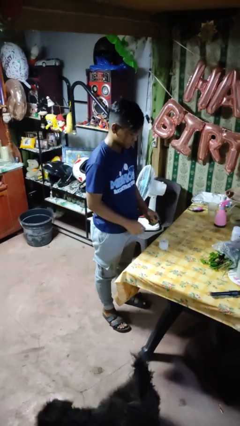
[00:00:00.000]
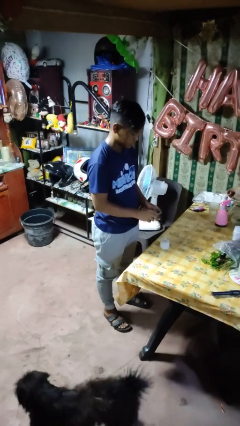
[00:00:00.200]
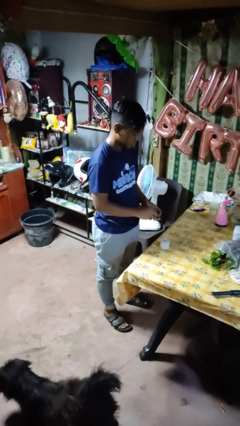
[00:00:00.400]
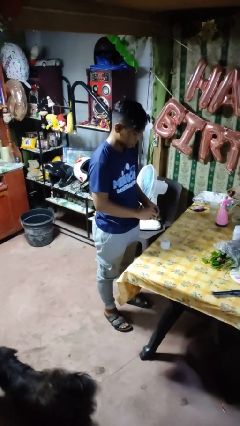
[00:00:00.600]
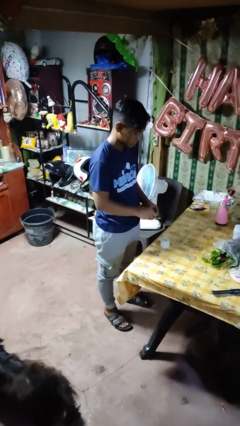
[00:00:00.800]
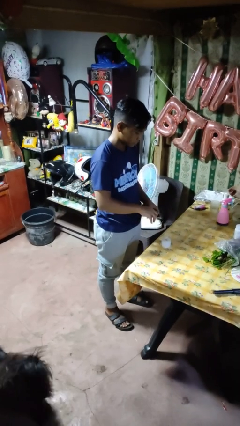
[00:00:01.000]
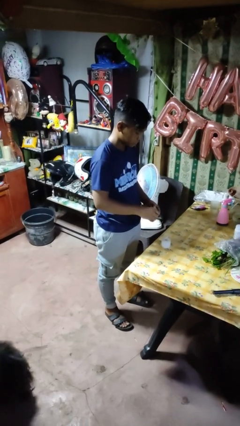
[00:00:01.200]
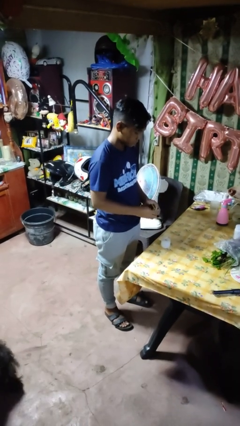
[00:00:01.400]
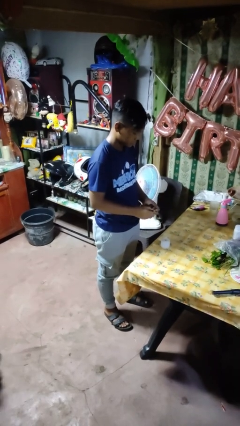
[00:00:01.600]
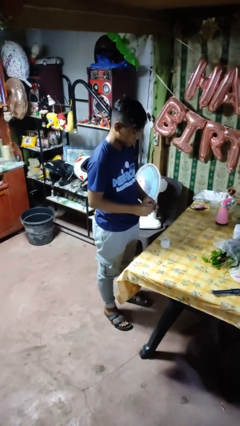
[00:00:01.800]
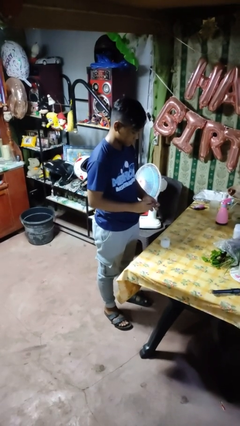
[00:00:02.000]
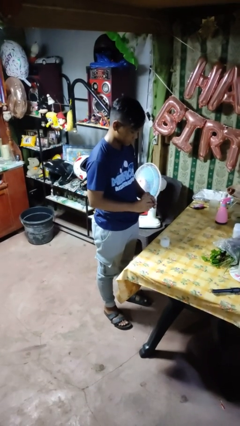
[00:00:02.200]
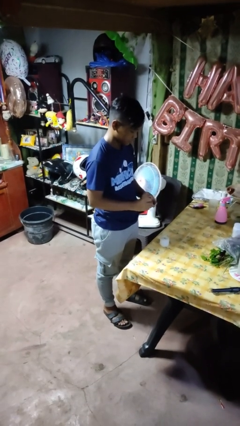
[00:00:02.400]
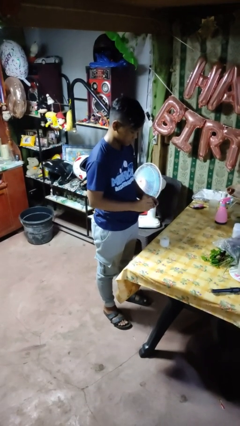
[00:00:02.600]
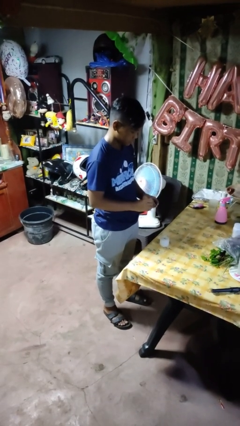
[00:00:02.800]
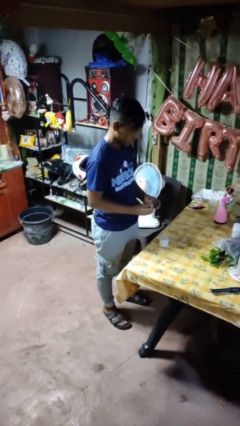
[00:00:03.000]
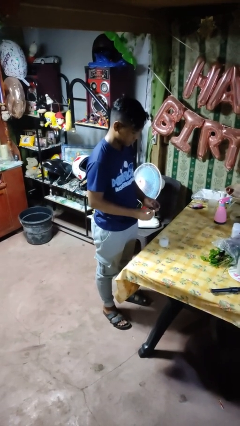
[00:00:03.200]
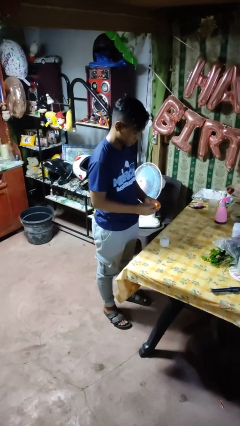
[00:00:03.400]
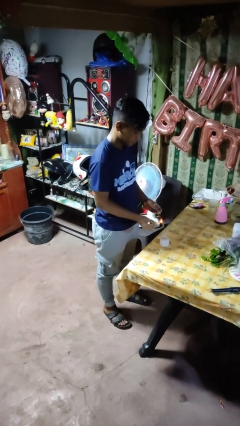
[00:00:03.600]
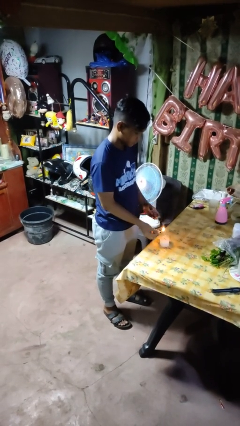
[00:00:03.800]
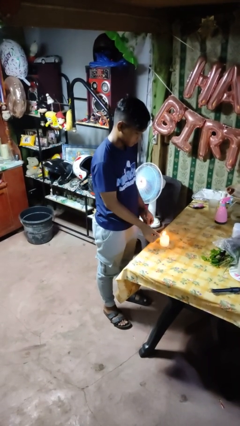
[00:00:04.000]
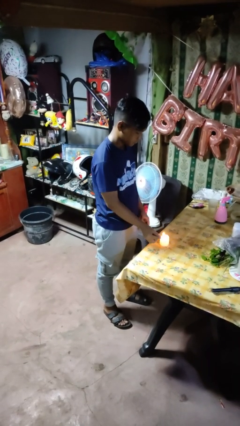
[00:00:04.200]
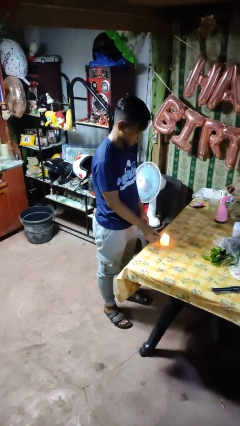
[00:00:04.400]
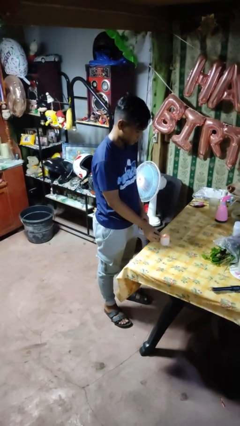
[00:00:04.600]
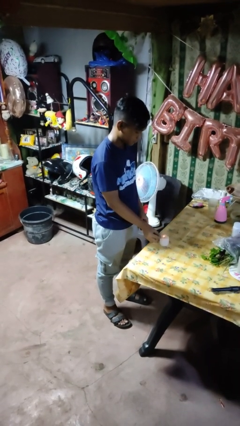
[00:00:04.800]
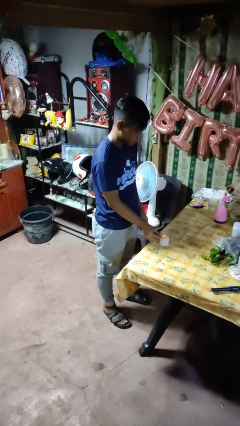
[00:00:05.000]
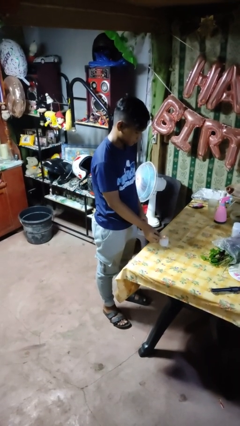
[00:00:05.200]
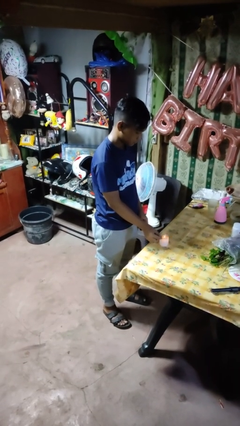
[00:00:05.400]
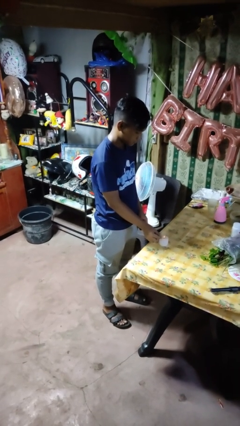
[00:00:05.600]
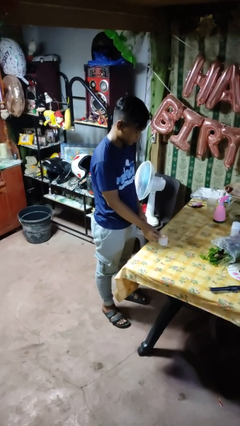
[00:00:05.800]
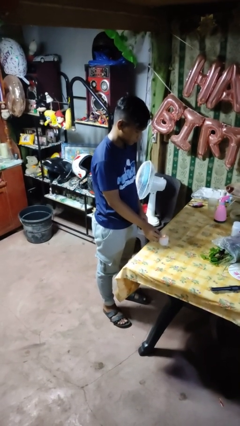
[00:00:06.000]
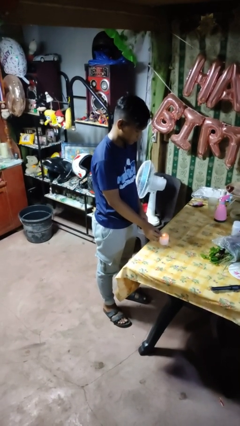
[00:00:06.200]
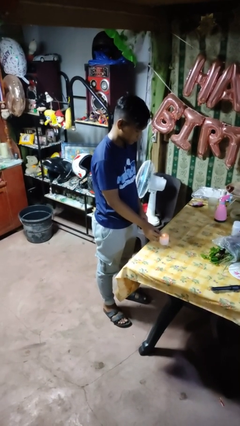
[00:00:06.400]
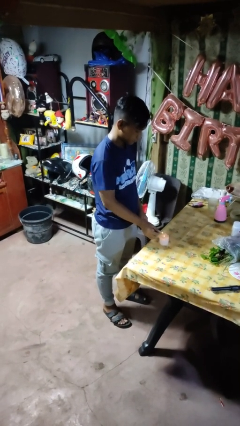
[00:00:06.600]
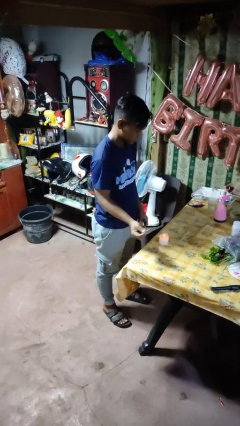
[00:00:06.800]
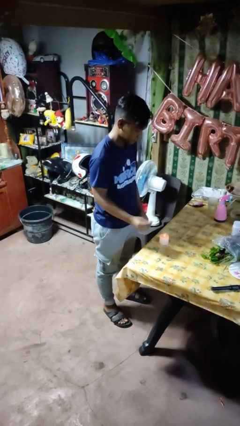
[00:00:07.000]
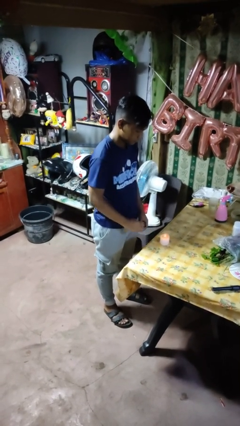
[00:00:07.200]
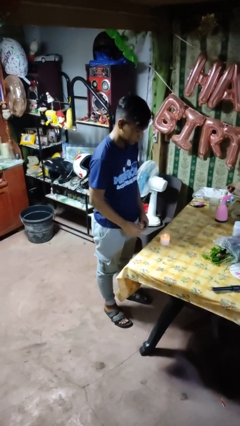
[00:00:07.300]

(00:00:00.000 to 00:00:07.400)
person lights candle

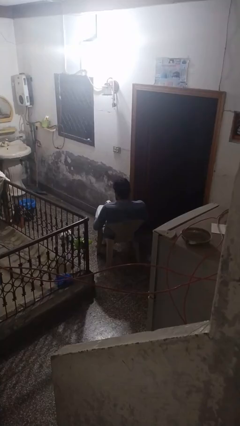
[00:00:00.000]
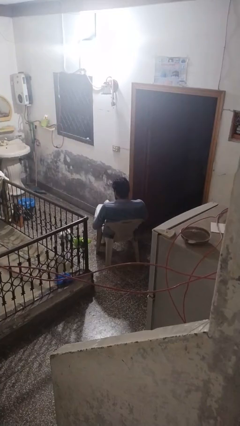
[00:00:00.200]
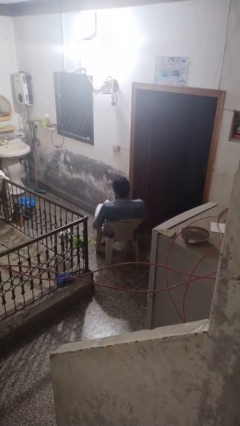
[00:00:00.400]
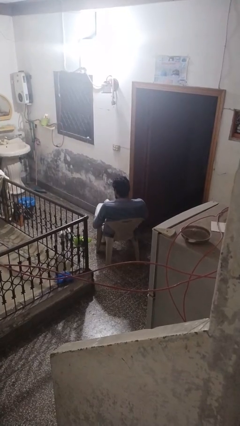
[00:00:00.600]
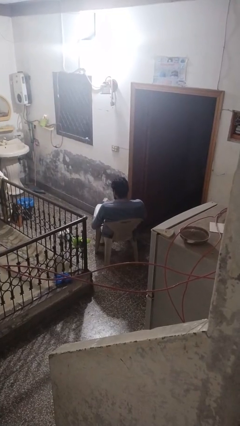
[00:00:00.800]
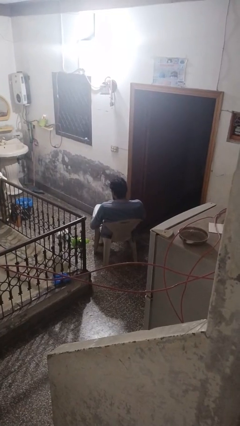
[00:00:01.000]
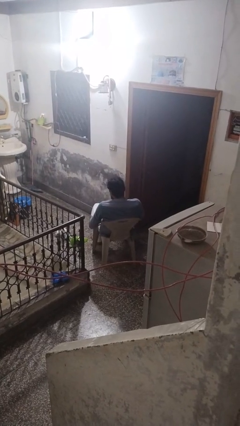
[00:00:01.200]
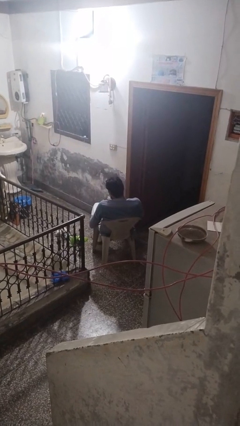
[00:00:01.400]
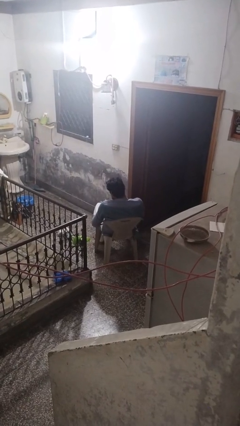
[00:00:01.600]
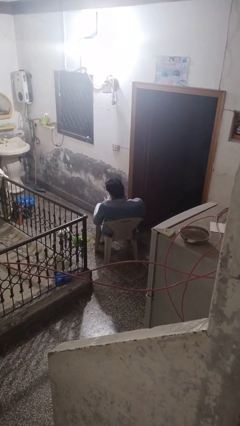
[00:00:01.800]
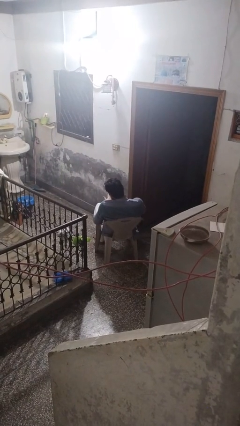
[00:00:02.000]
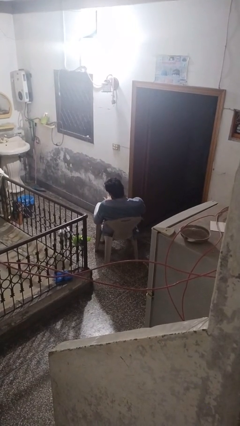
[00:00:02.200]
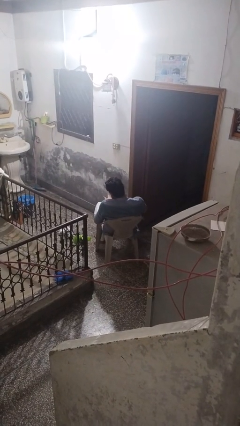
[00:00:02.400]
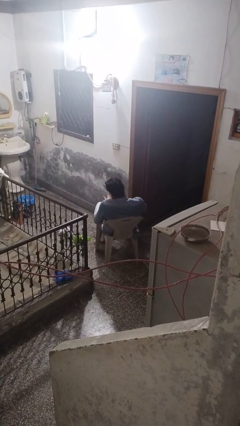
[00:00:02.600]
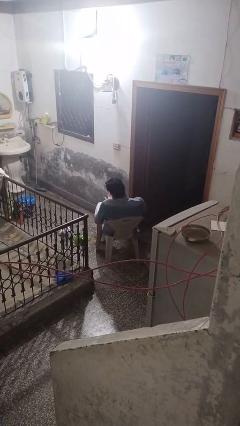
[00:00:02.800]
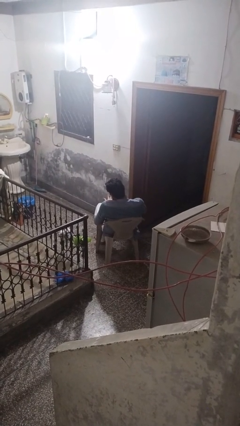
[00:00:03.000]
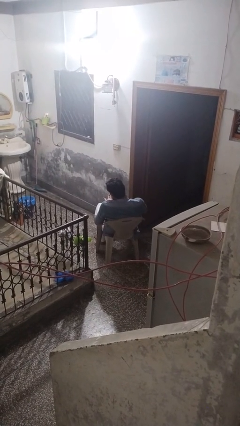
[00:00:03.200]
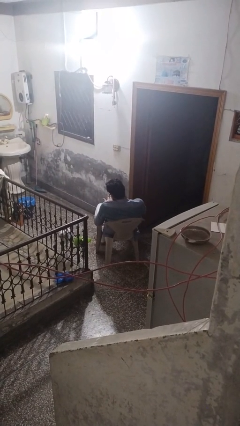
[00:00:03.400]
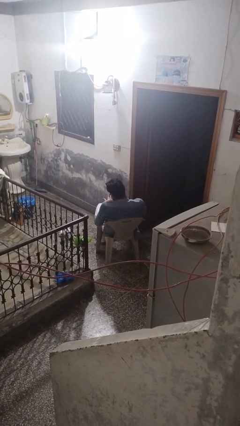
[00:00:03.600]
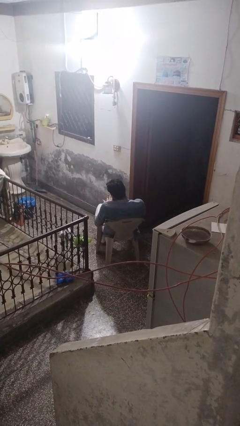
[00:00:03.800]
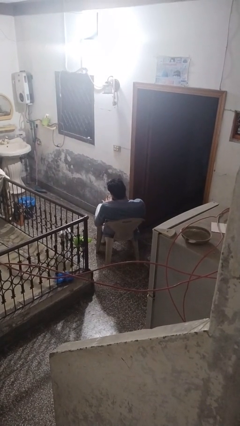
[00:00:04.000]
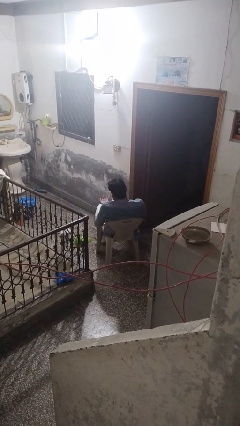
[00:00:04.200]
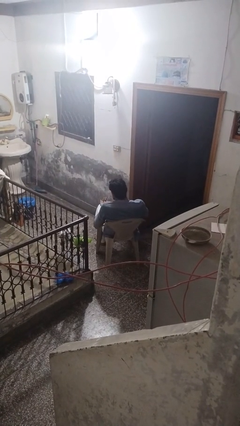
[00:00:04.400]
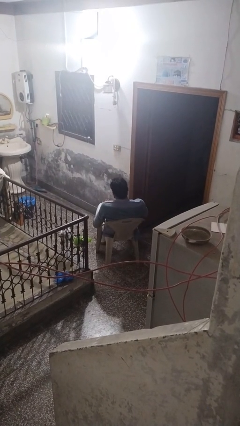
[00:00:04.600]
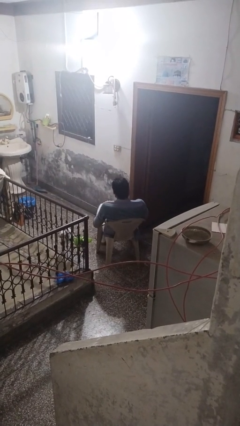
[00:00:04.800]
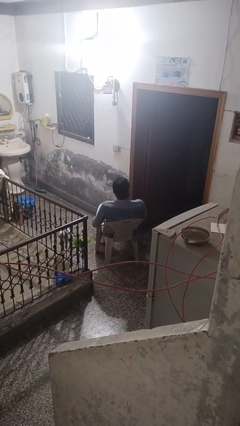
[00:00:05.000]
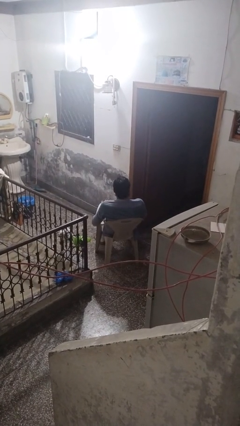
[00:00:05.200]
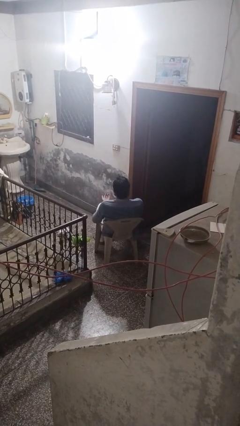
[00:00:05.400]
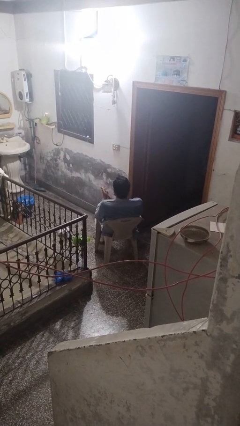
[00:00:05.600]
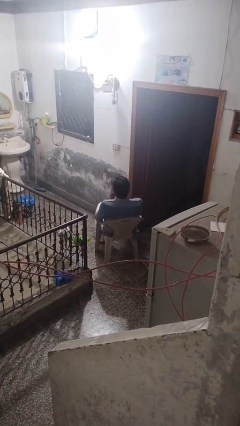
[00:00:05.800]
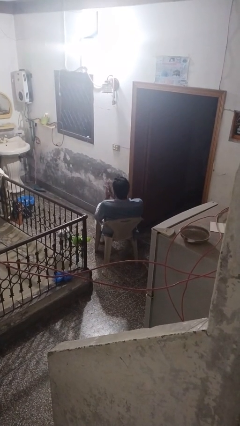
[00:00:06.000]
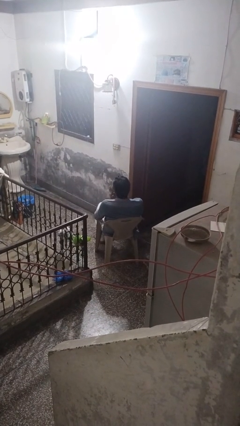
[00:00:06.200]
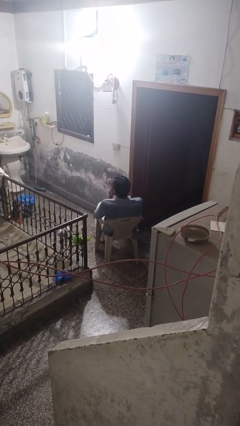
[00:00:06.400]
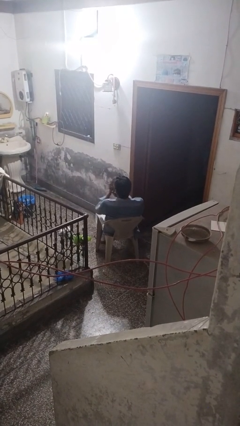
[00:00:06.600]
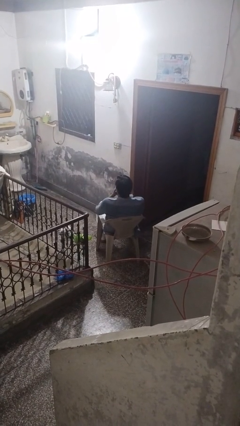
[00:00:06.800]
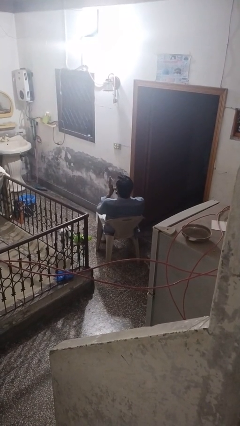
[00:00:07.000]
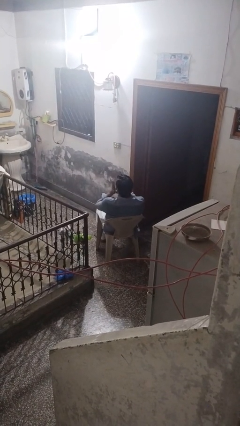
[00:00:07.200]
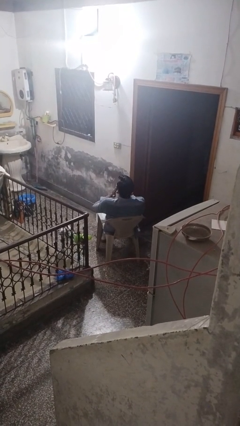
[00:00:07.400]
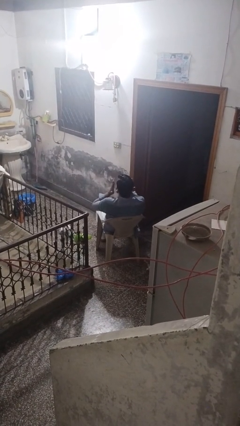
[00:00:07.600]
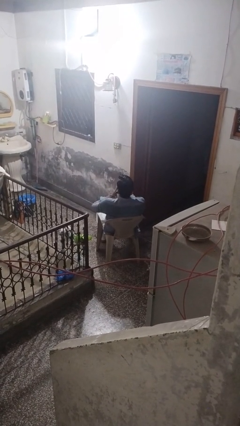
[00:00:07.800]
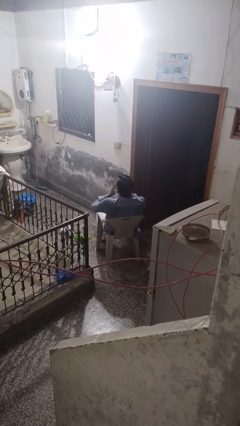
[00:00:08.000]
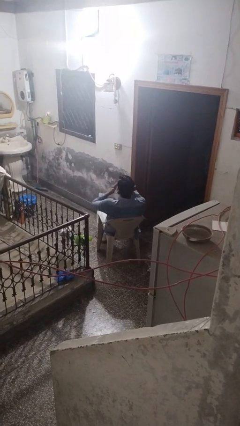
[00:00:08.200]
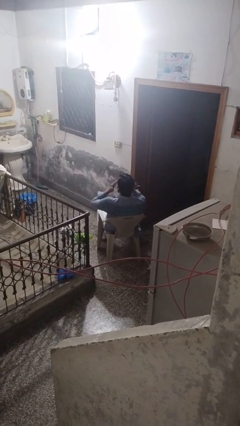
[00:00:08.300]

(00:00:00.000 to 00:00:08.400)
person applies sunscreen

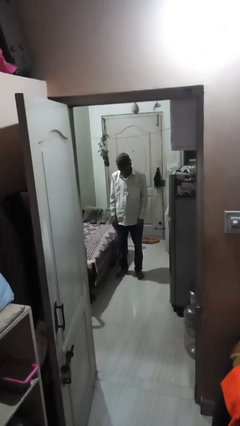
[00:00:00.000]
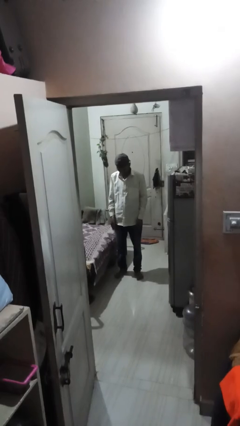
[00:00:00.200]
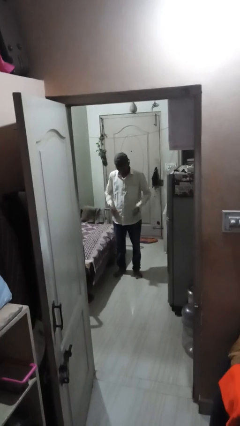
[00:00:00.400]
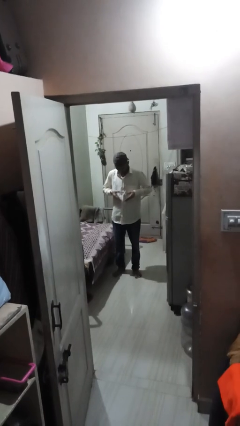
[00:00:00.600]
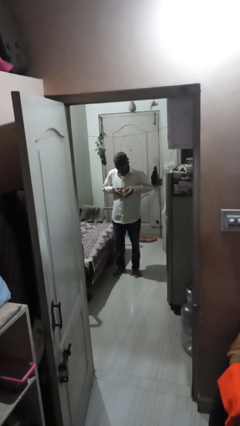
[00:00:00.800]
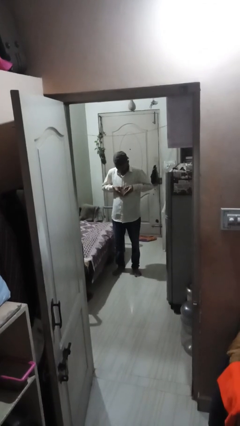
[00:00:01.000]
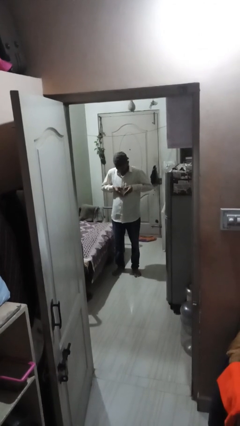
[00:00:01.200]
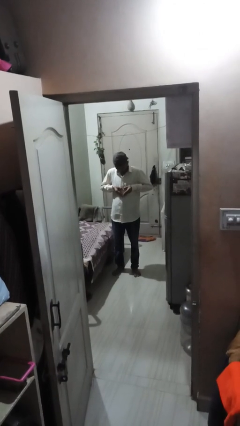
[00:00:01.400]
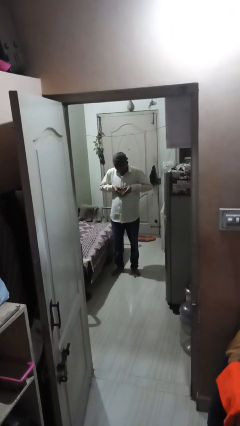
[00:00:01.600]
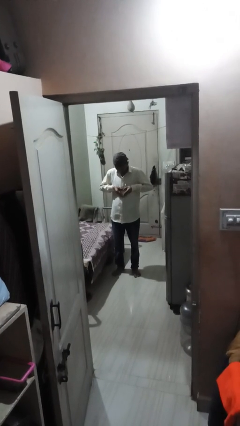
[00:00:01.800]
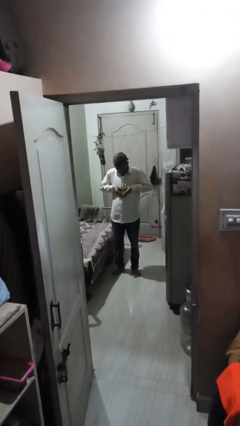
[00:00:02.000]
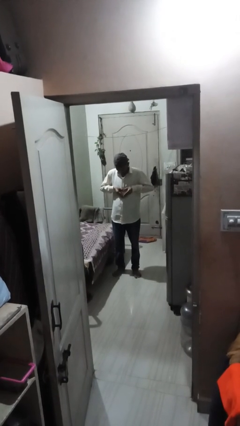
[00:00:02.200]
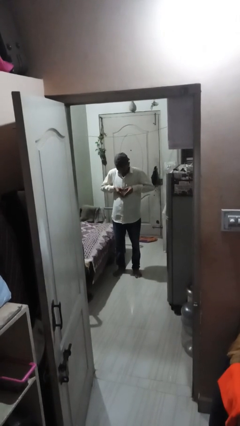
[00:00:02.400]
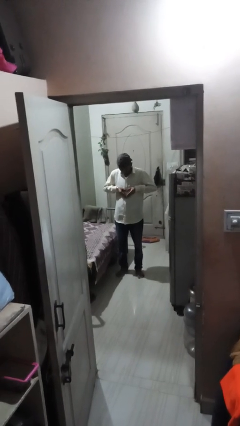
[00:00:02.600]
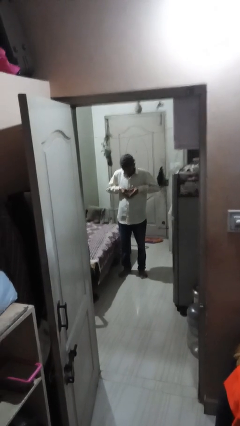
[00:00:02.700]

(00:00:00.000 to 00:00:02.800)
person gestures heart
